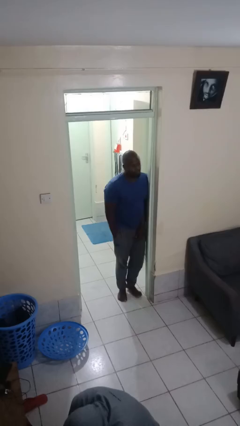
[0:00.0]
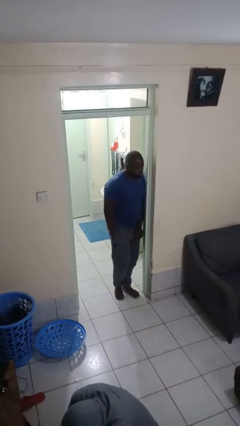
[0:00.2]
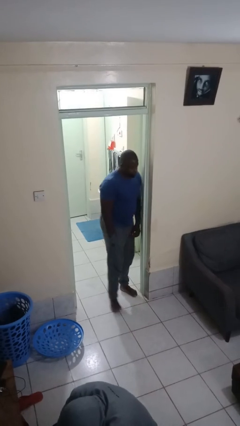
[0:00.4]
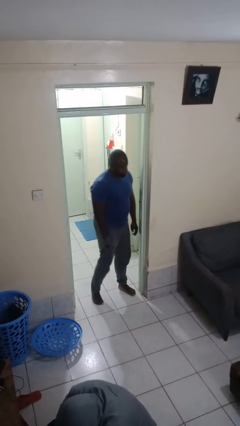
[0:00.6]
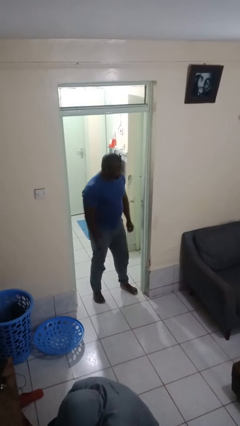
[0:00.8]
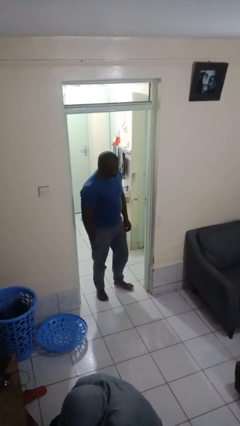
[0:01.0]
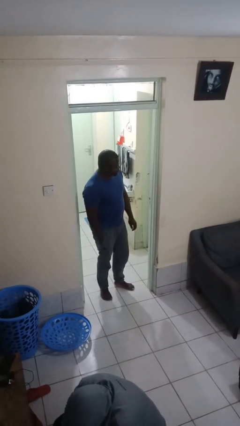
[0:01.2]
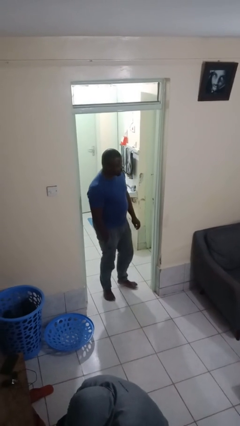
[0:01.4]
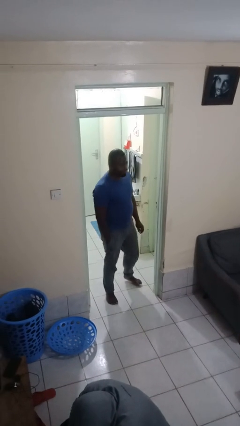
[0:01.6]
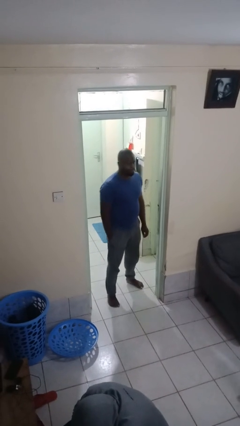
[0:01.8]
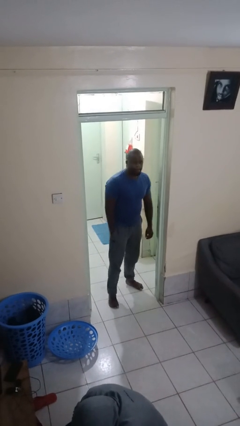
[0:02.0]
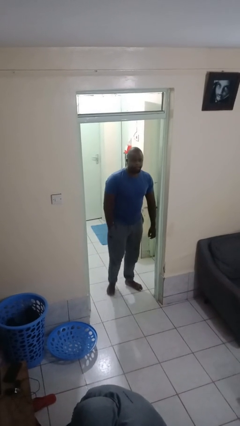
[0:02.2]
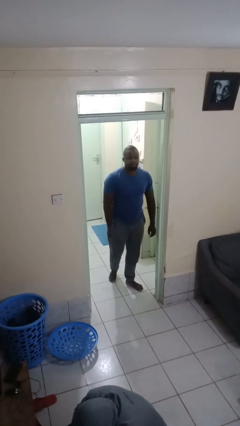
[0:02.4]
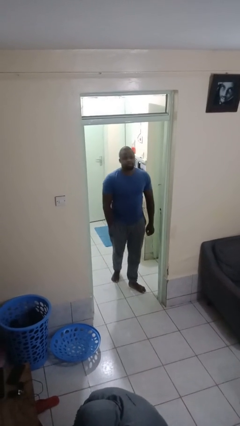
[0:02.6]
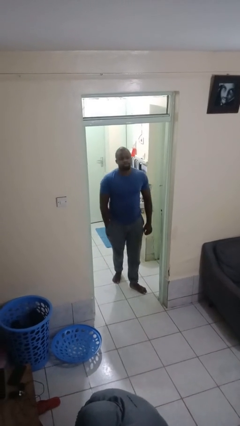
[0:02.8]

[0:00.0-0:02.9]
person bumps into wall

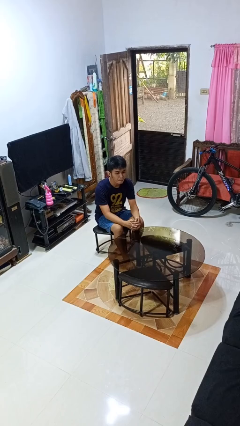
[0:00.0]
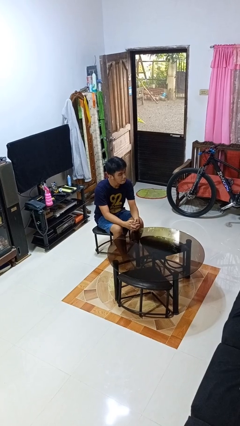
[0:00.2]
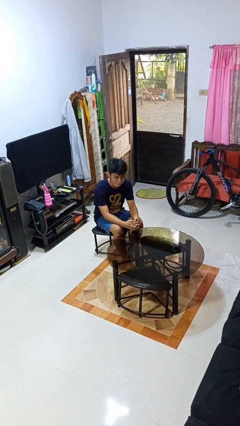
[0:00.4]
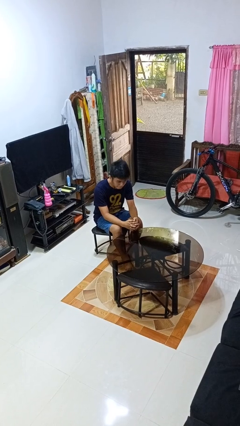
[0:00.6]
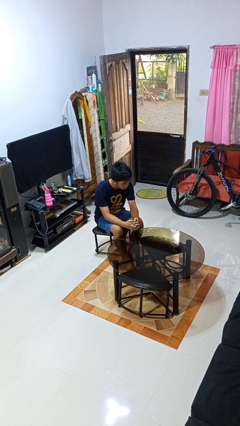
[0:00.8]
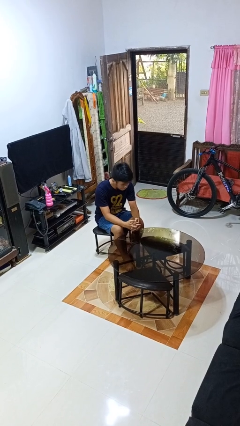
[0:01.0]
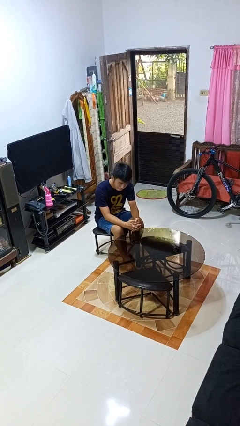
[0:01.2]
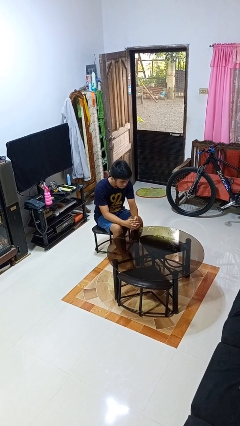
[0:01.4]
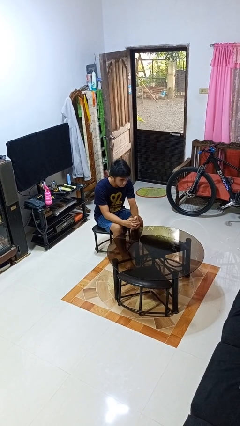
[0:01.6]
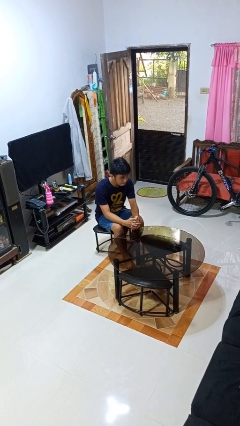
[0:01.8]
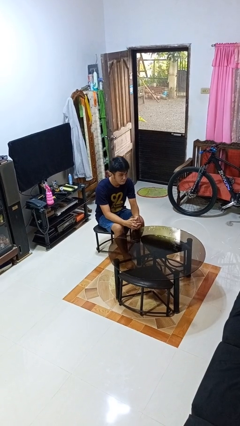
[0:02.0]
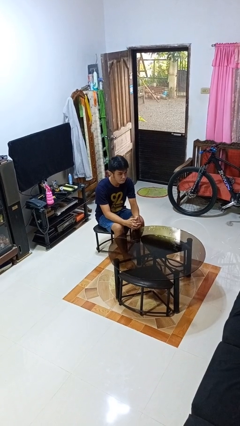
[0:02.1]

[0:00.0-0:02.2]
person shakes head

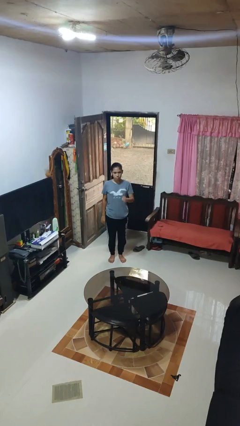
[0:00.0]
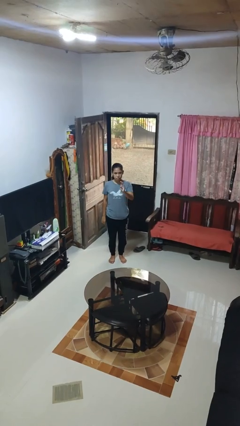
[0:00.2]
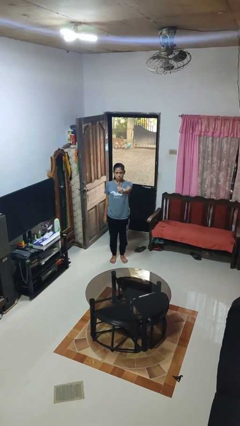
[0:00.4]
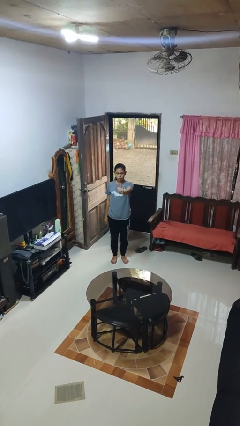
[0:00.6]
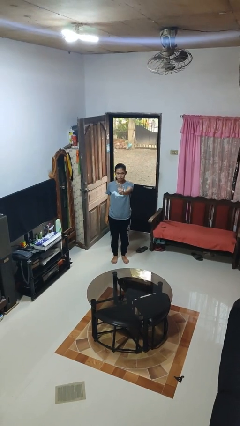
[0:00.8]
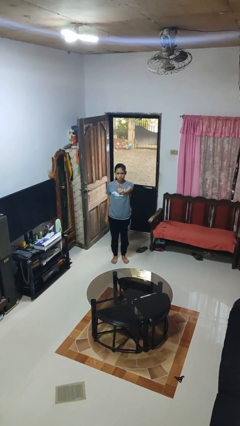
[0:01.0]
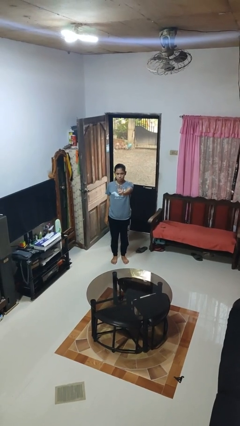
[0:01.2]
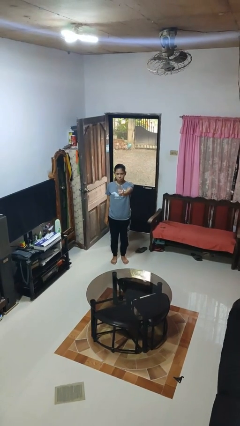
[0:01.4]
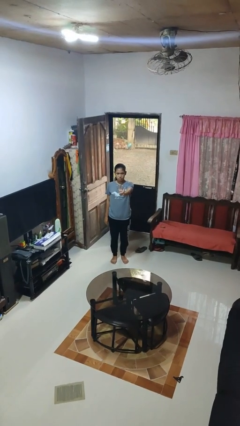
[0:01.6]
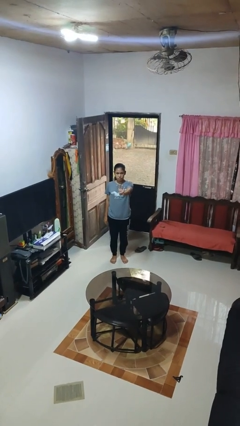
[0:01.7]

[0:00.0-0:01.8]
person gestures number four

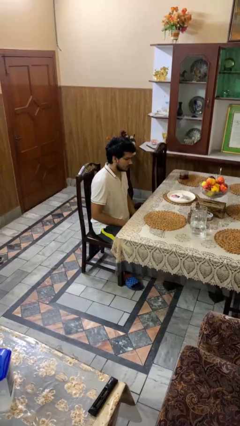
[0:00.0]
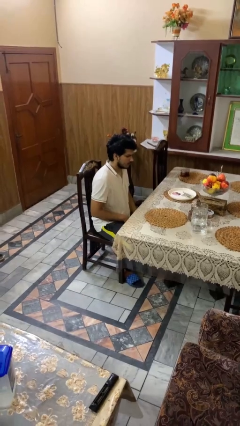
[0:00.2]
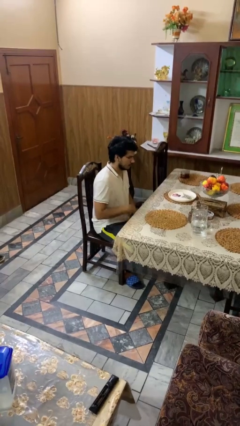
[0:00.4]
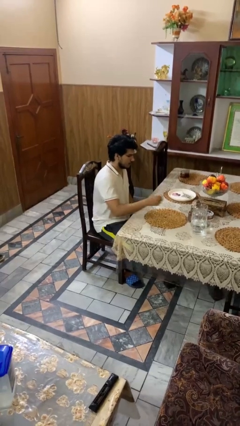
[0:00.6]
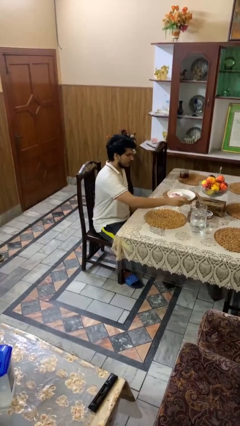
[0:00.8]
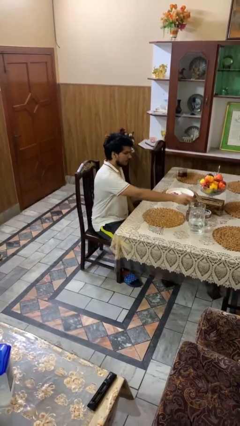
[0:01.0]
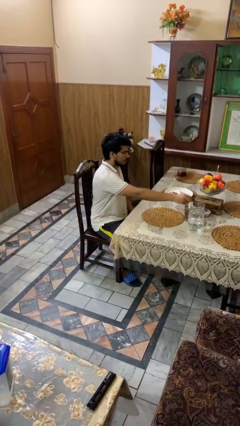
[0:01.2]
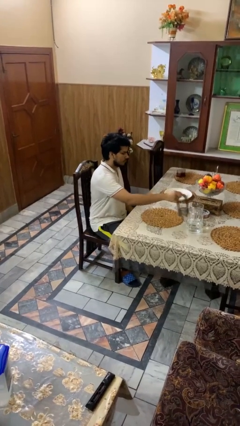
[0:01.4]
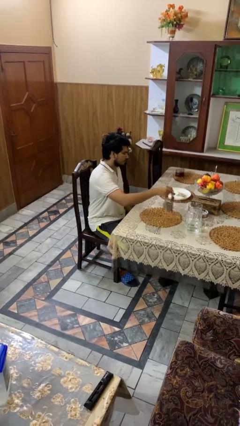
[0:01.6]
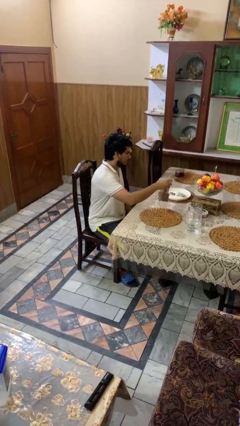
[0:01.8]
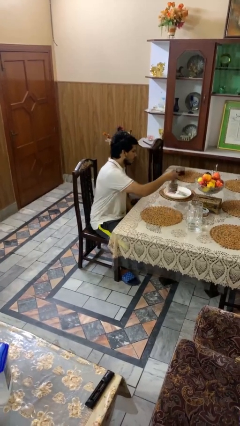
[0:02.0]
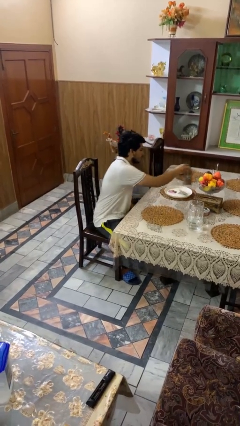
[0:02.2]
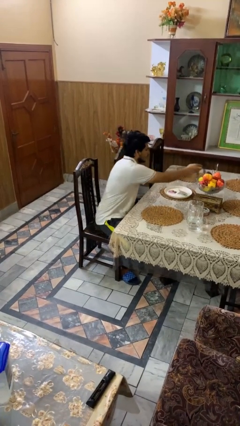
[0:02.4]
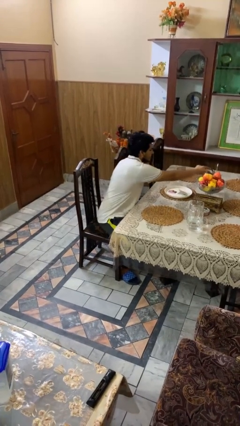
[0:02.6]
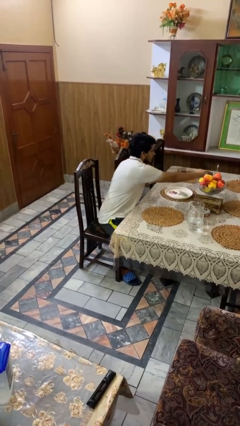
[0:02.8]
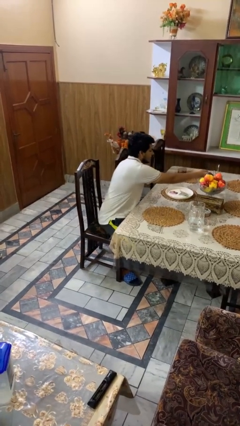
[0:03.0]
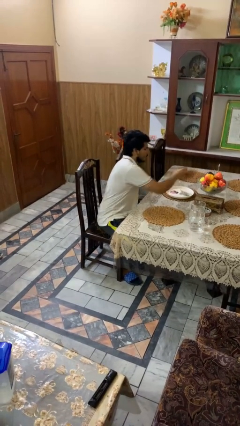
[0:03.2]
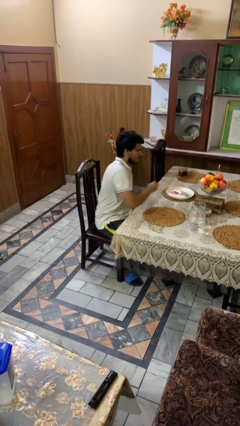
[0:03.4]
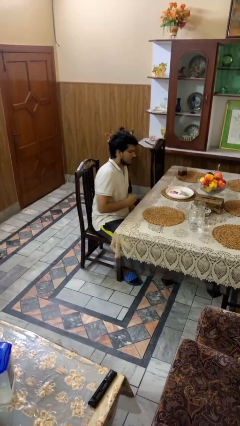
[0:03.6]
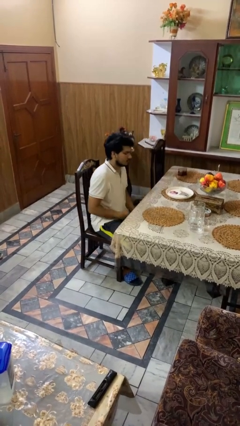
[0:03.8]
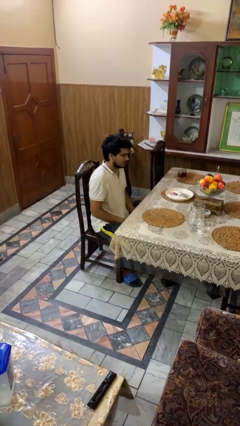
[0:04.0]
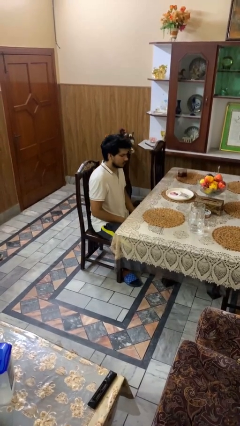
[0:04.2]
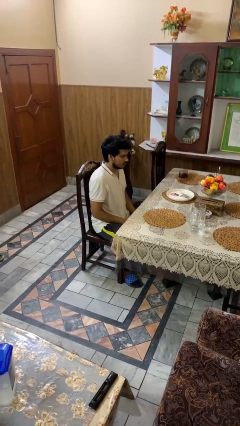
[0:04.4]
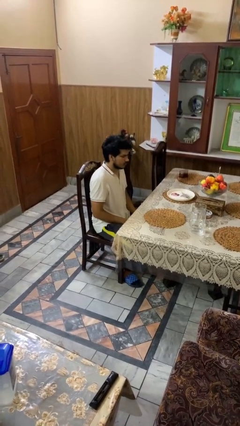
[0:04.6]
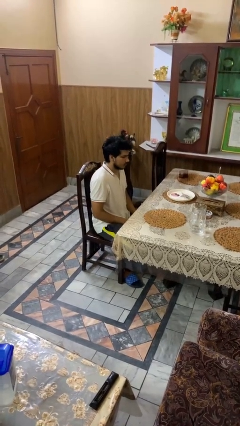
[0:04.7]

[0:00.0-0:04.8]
person sets table

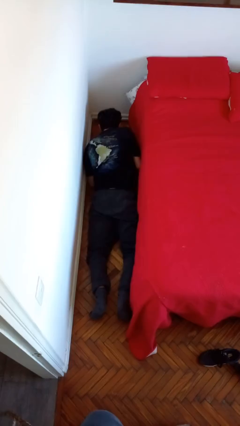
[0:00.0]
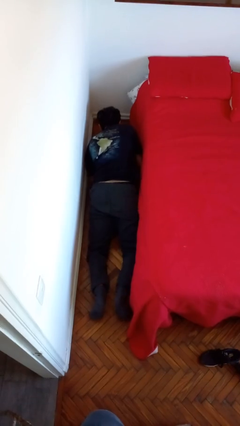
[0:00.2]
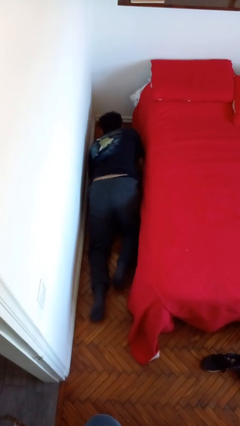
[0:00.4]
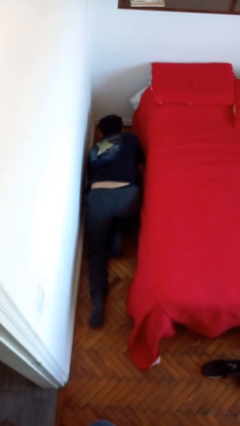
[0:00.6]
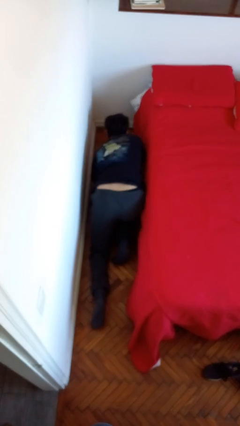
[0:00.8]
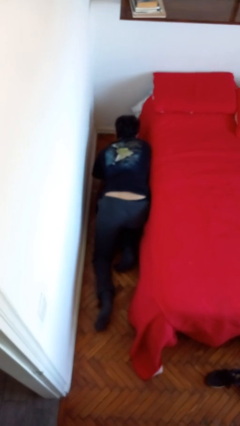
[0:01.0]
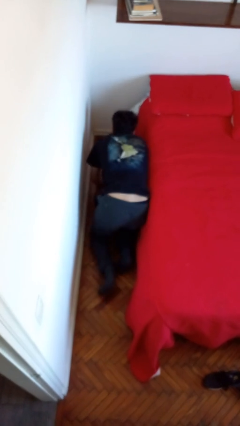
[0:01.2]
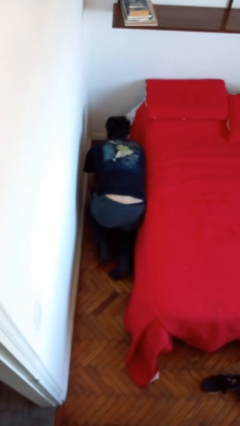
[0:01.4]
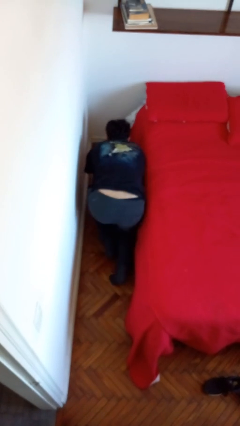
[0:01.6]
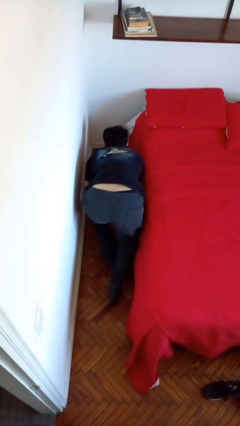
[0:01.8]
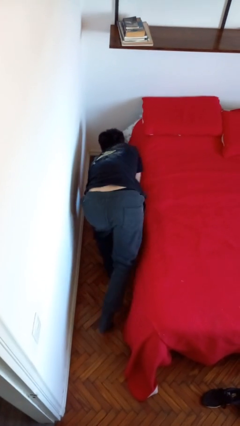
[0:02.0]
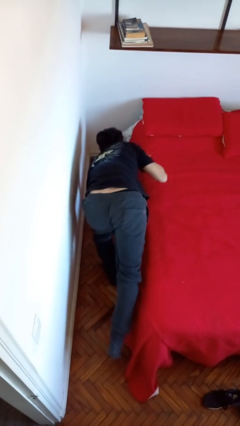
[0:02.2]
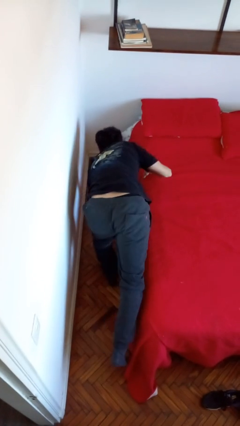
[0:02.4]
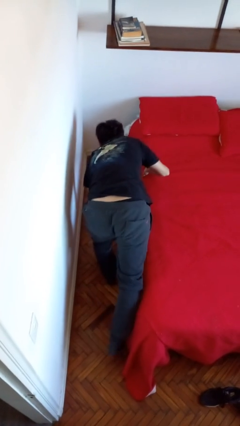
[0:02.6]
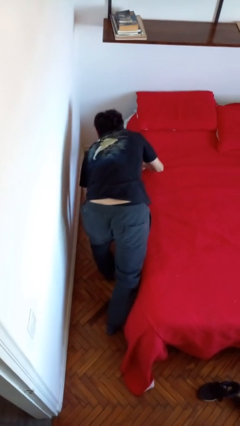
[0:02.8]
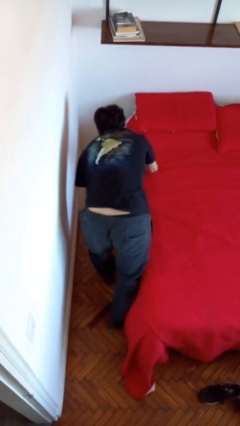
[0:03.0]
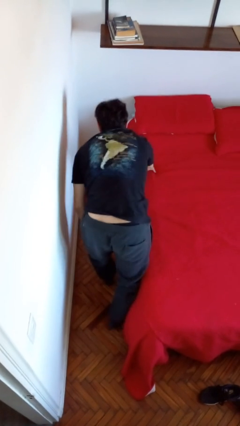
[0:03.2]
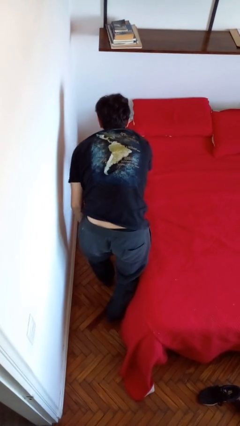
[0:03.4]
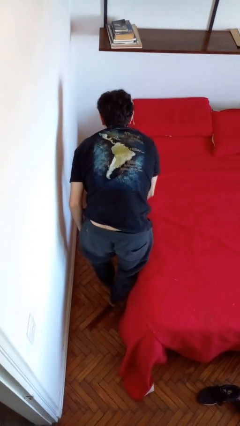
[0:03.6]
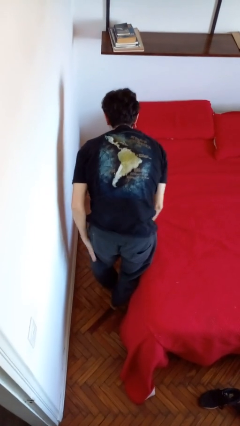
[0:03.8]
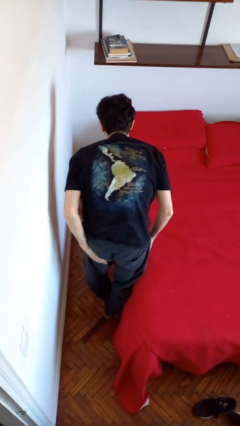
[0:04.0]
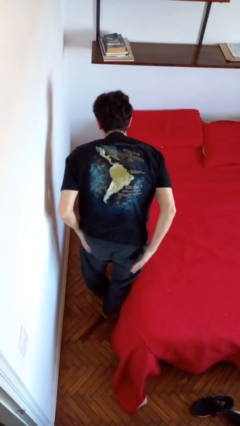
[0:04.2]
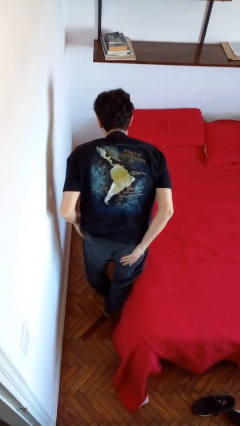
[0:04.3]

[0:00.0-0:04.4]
person stands up from floor

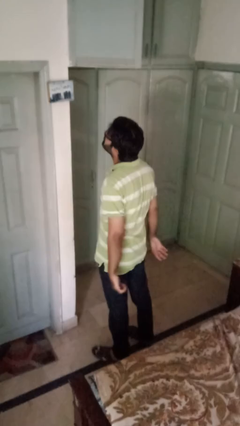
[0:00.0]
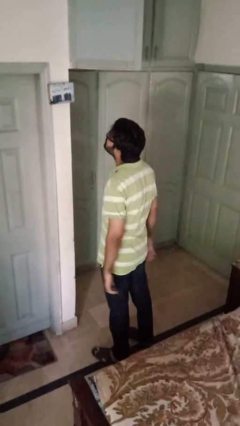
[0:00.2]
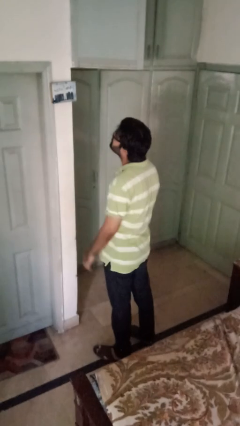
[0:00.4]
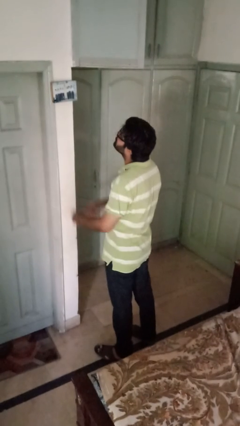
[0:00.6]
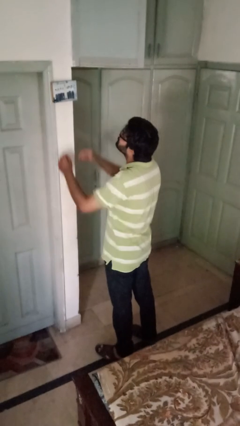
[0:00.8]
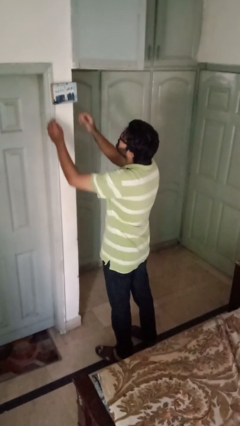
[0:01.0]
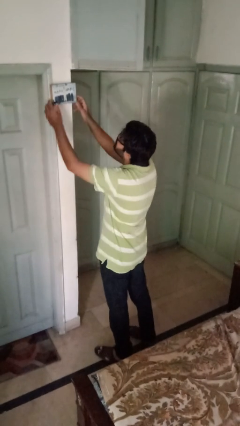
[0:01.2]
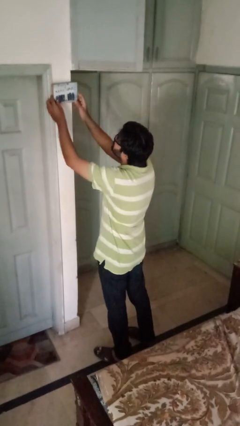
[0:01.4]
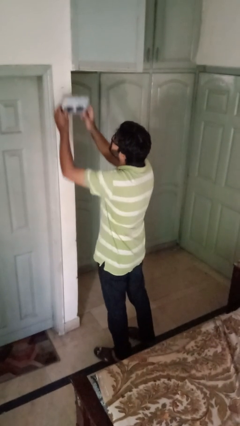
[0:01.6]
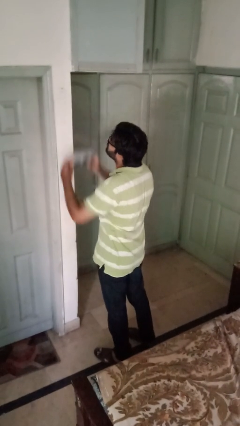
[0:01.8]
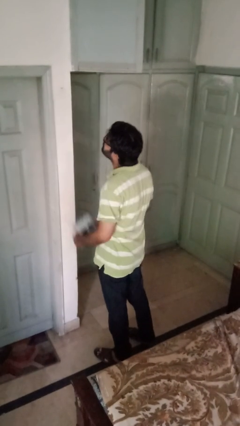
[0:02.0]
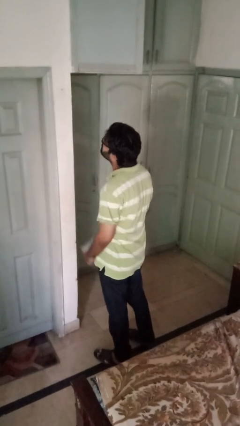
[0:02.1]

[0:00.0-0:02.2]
person takes down picture frame
